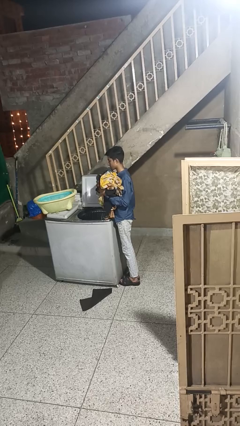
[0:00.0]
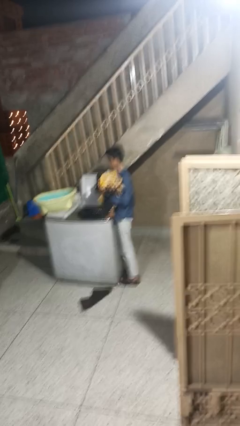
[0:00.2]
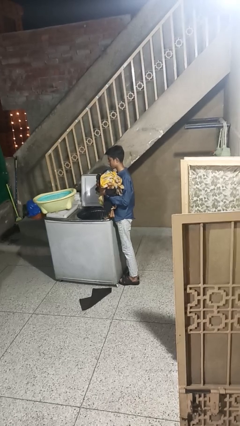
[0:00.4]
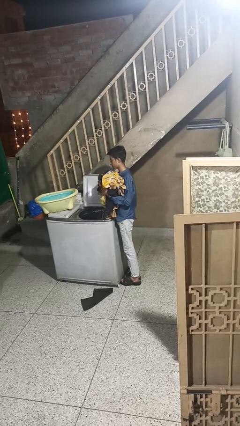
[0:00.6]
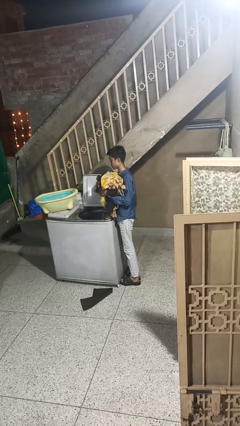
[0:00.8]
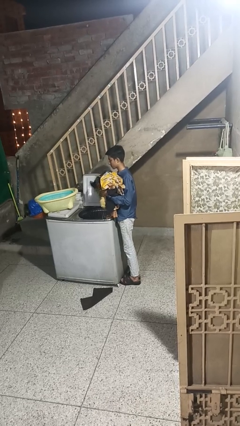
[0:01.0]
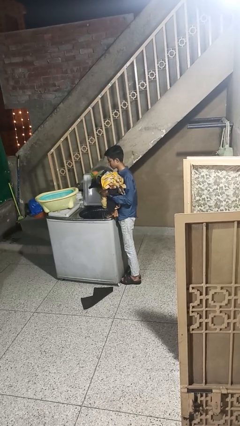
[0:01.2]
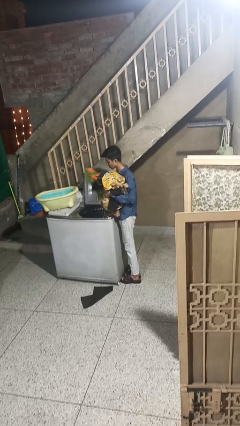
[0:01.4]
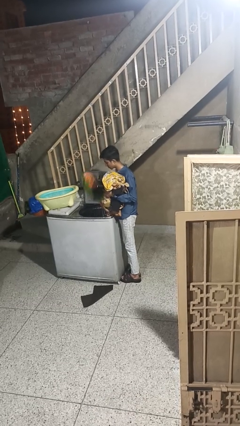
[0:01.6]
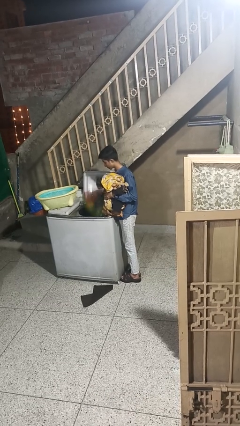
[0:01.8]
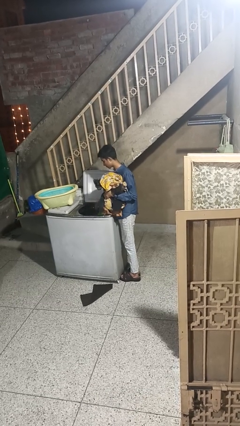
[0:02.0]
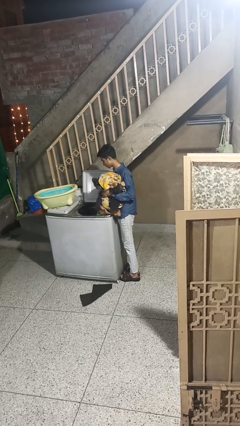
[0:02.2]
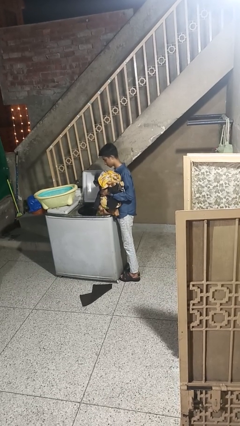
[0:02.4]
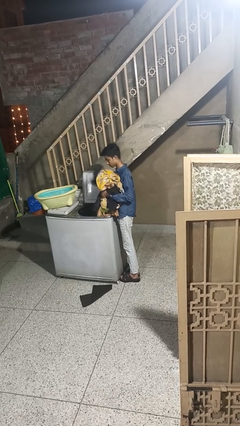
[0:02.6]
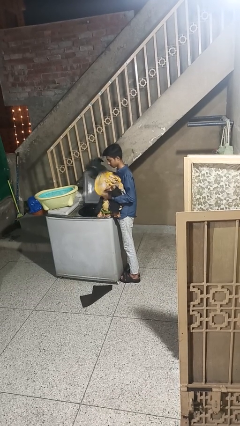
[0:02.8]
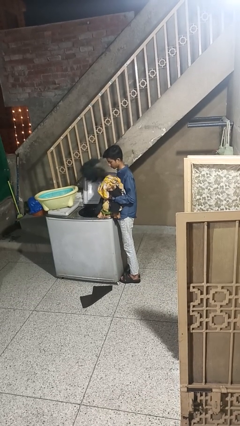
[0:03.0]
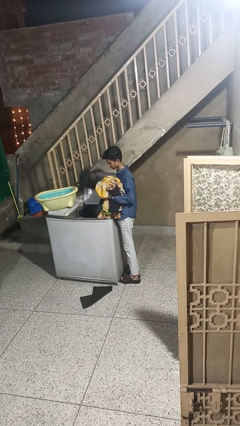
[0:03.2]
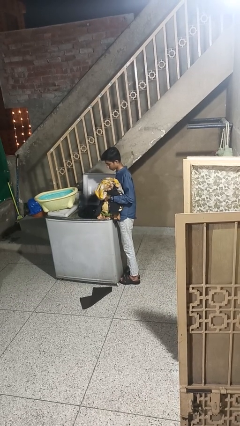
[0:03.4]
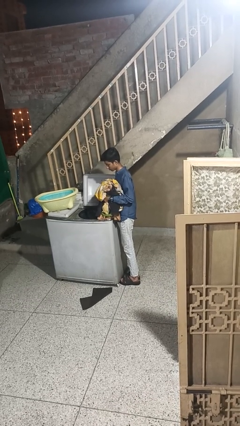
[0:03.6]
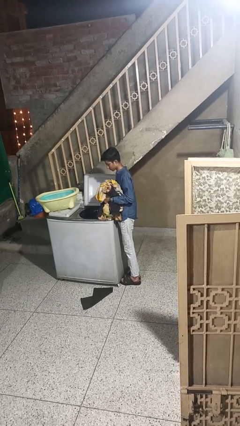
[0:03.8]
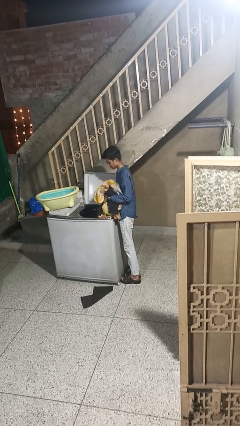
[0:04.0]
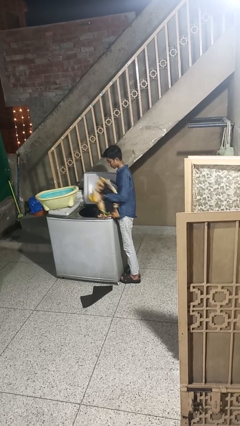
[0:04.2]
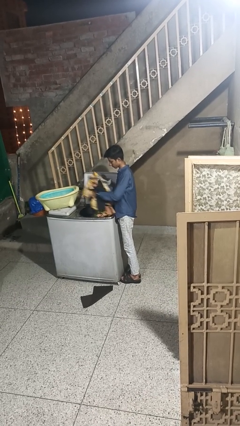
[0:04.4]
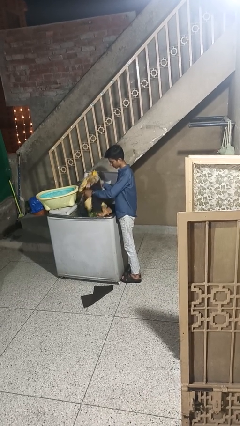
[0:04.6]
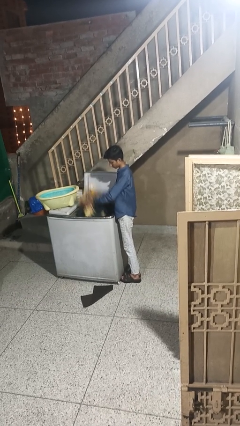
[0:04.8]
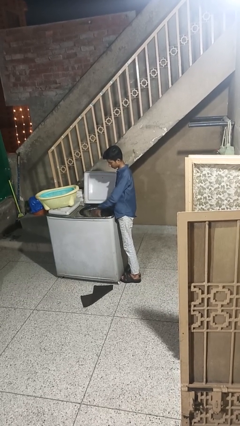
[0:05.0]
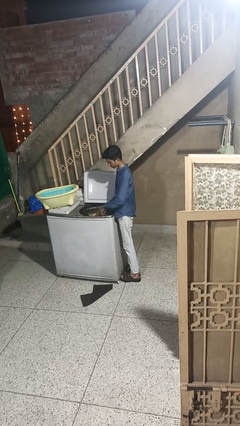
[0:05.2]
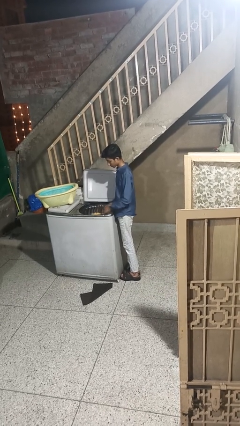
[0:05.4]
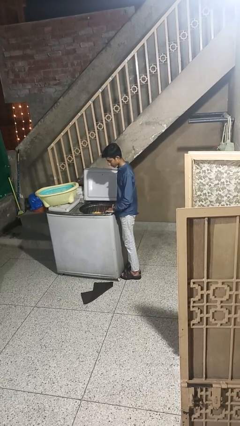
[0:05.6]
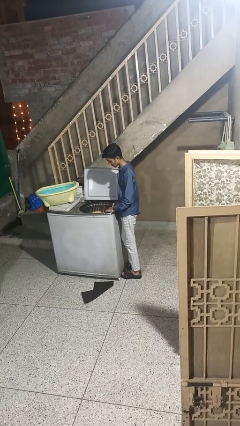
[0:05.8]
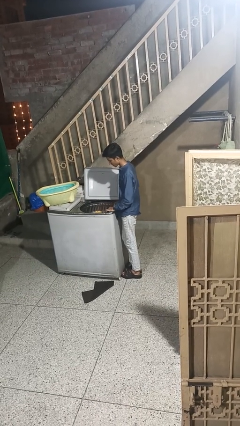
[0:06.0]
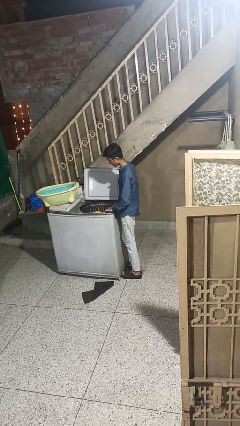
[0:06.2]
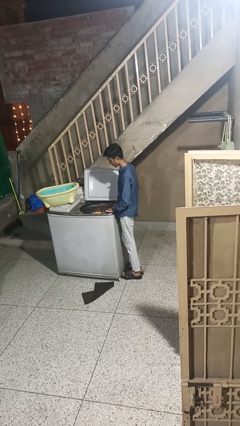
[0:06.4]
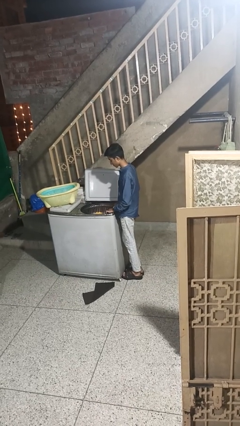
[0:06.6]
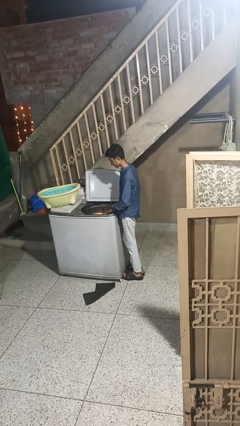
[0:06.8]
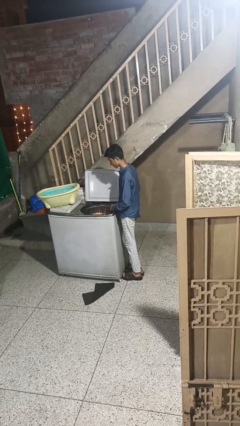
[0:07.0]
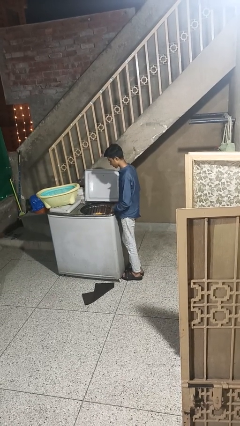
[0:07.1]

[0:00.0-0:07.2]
person unloads clotheswasher

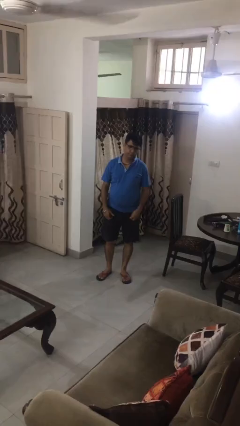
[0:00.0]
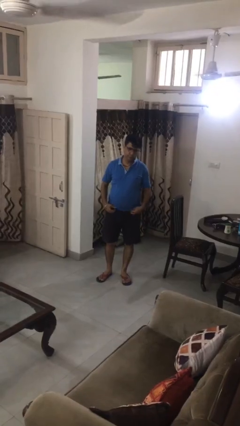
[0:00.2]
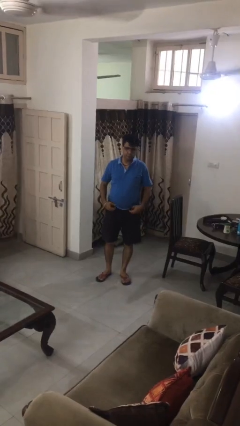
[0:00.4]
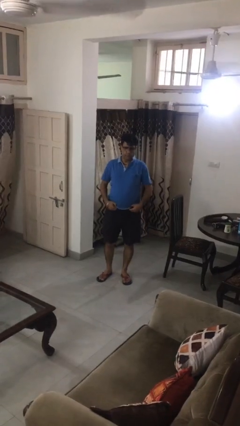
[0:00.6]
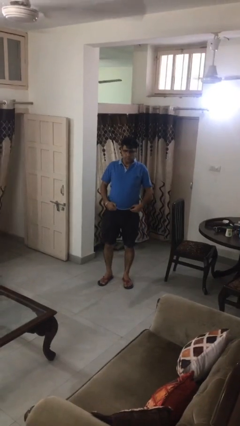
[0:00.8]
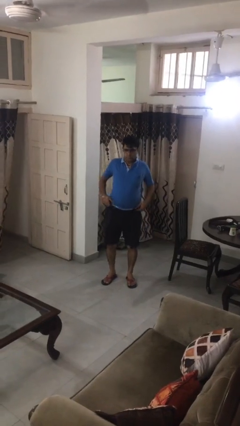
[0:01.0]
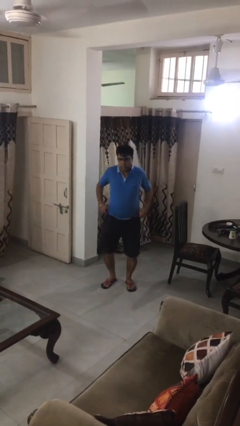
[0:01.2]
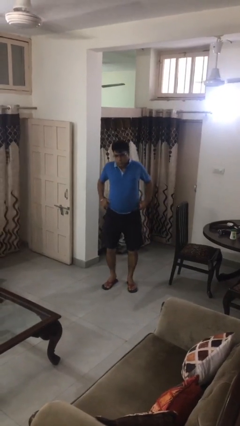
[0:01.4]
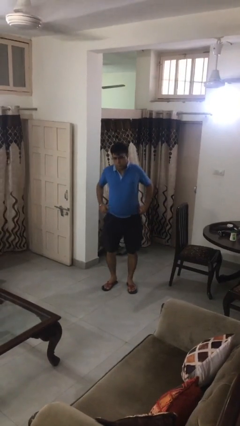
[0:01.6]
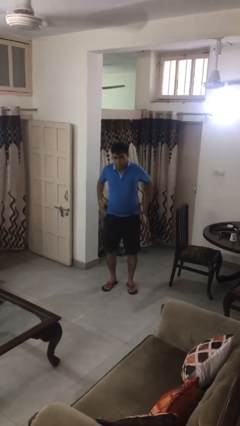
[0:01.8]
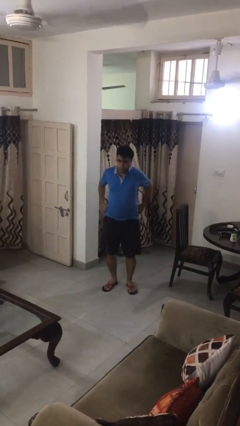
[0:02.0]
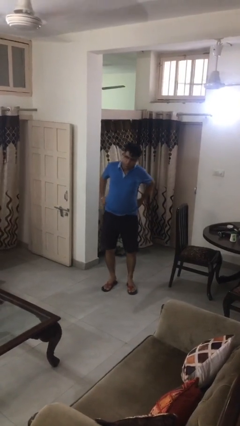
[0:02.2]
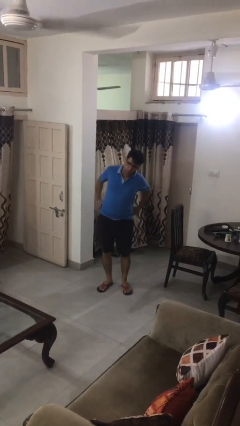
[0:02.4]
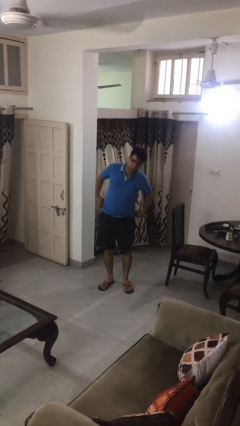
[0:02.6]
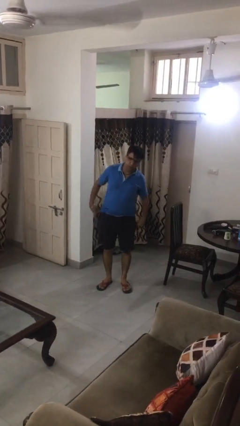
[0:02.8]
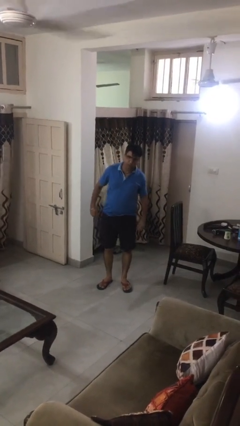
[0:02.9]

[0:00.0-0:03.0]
person hikes up pants

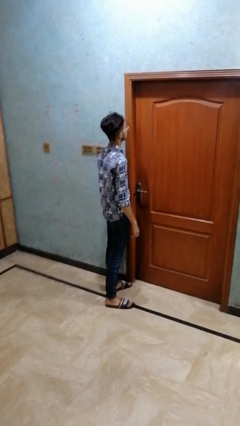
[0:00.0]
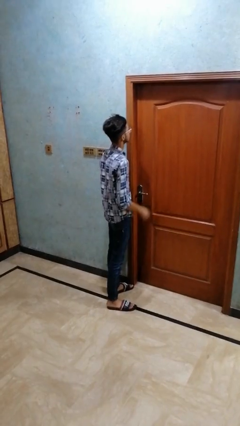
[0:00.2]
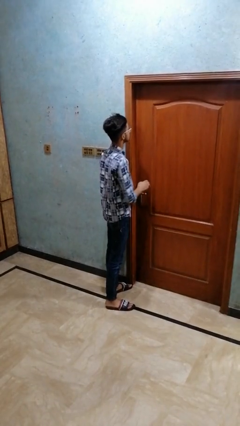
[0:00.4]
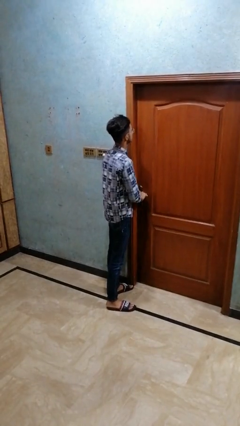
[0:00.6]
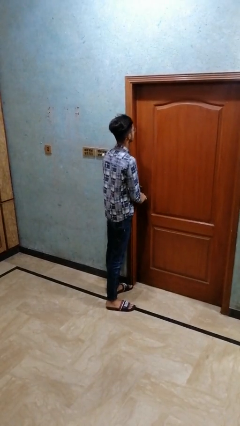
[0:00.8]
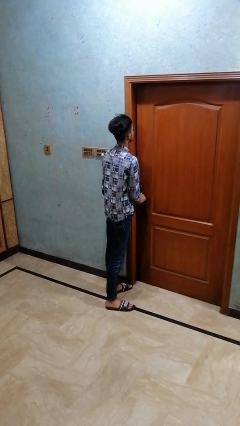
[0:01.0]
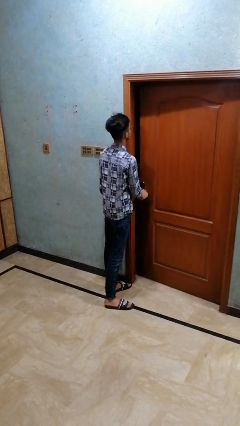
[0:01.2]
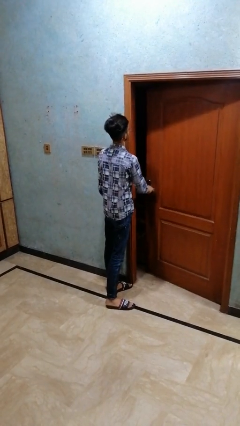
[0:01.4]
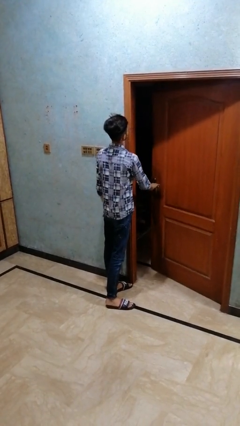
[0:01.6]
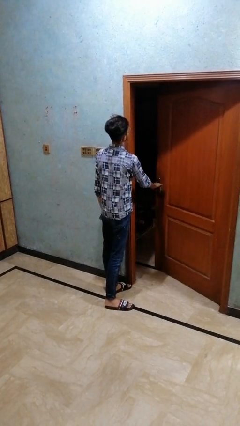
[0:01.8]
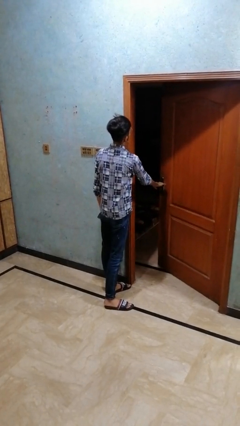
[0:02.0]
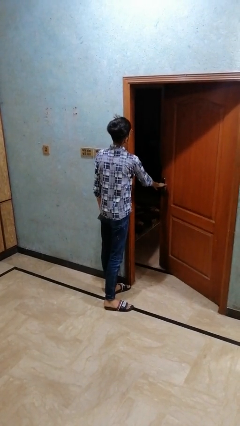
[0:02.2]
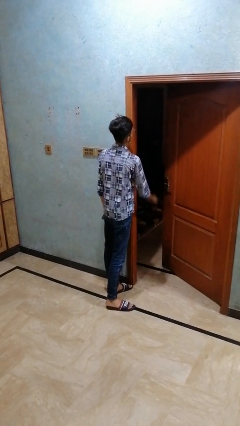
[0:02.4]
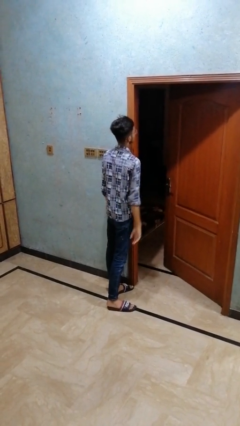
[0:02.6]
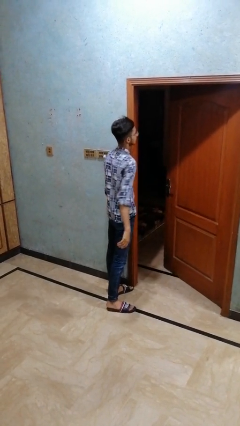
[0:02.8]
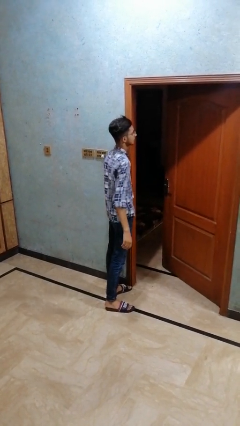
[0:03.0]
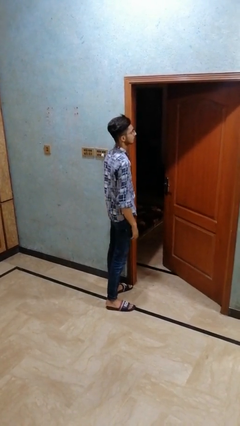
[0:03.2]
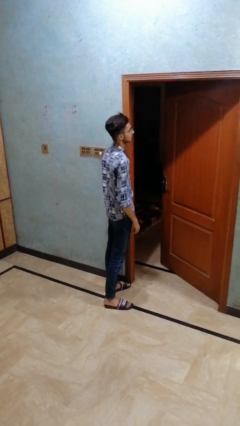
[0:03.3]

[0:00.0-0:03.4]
person opens closet door

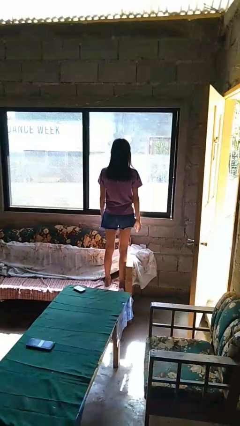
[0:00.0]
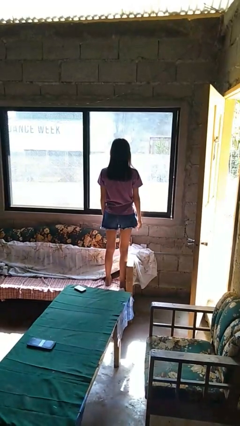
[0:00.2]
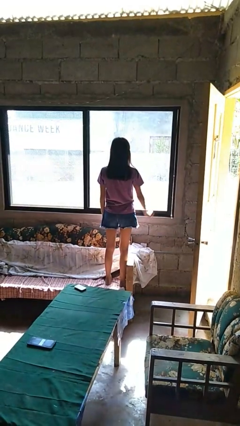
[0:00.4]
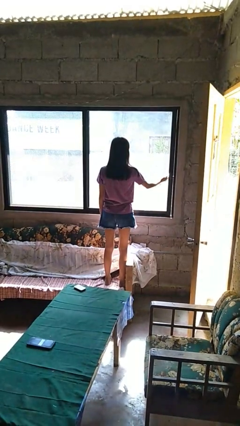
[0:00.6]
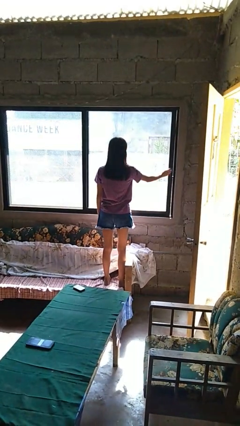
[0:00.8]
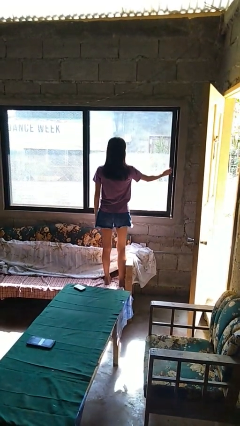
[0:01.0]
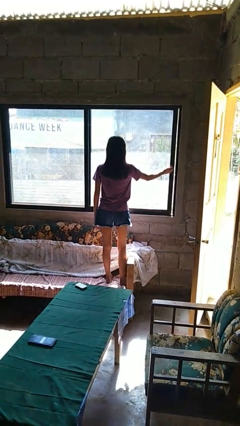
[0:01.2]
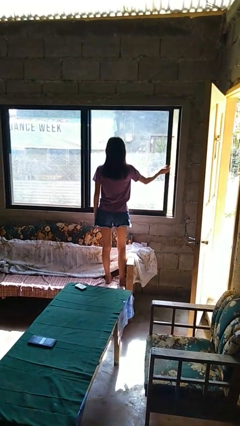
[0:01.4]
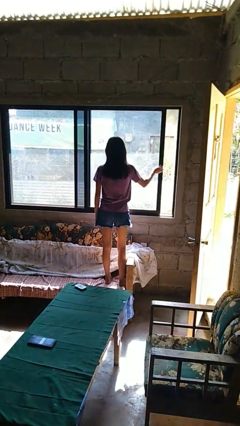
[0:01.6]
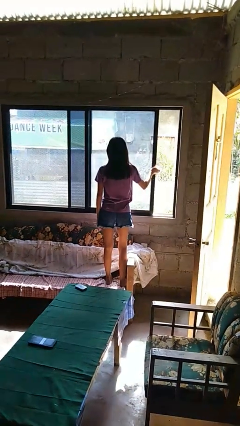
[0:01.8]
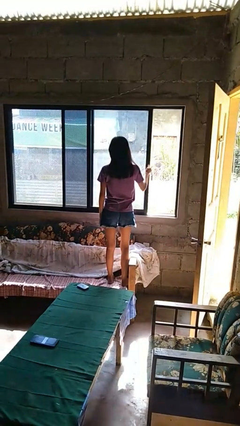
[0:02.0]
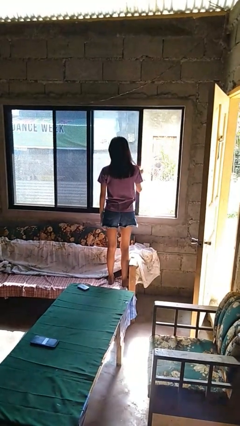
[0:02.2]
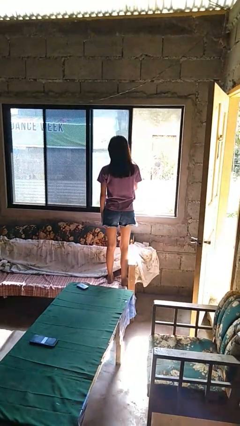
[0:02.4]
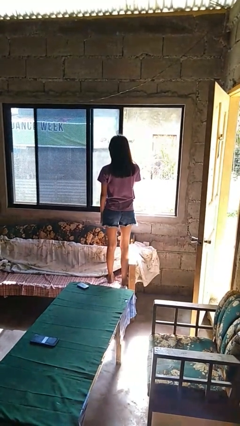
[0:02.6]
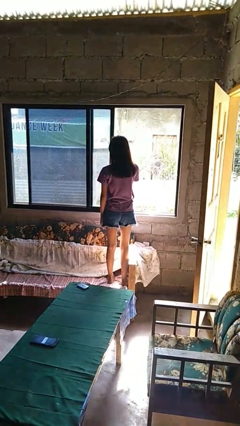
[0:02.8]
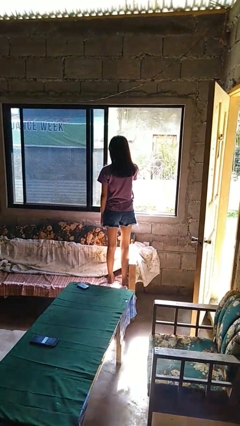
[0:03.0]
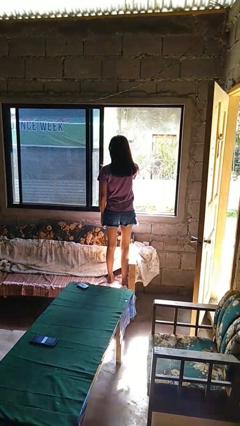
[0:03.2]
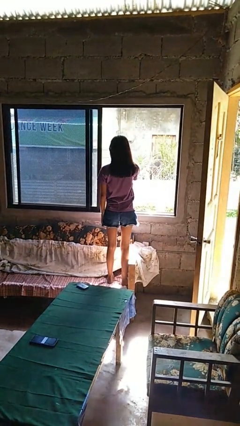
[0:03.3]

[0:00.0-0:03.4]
person opens home window

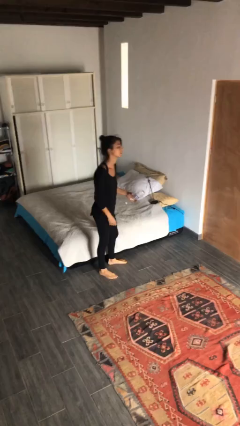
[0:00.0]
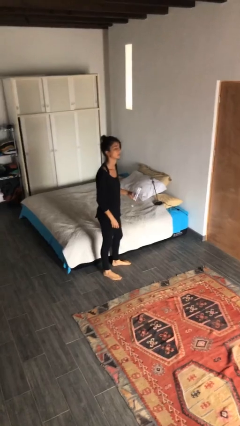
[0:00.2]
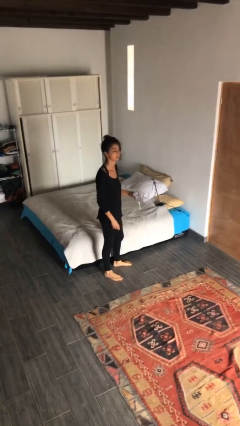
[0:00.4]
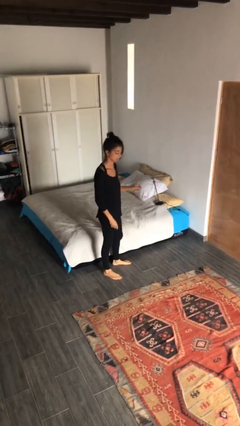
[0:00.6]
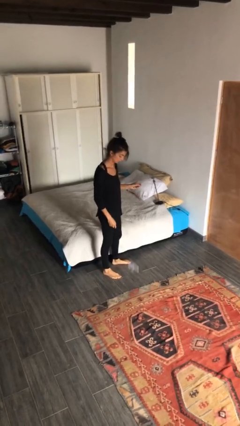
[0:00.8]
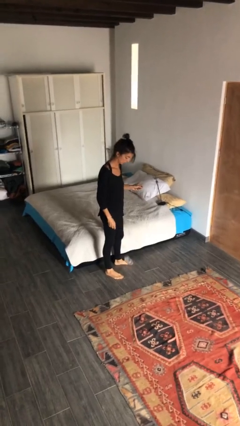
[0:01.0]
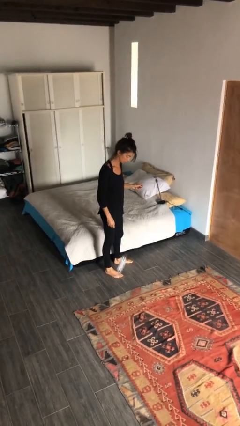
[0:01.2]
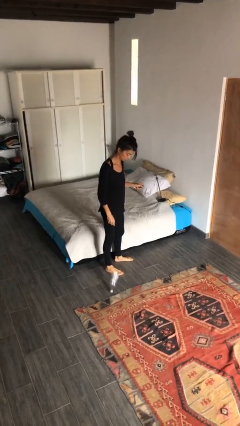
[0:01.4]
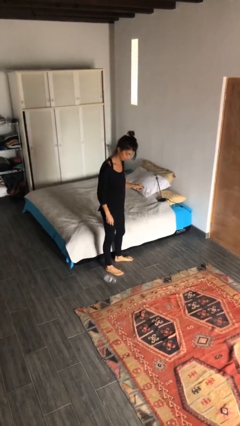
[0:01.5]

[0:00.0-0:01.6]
person drops object
